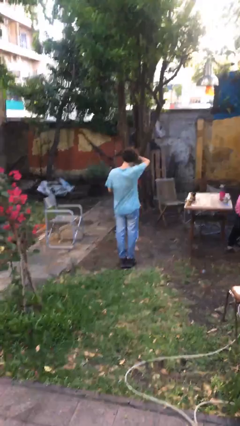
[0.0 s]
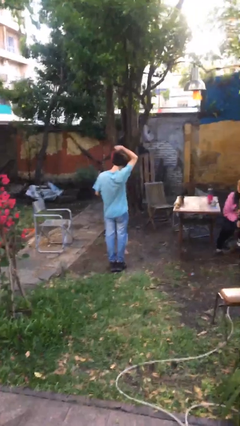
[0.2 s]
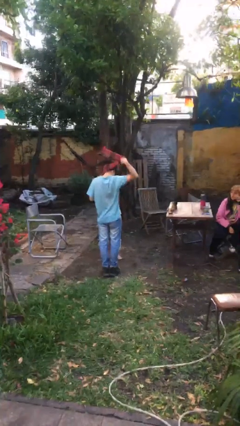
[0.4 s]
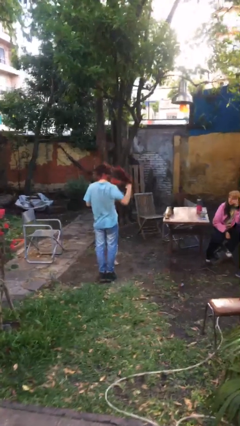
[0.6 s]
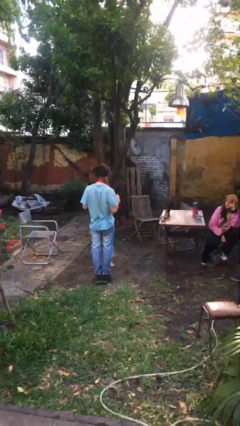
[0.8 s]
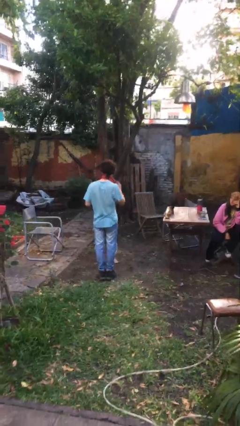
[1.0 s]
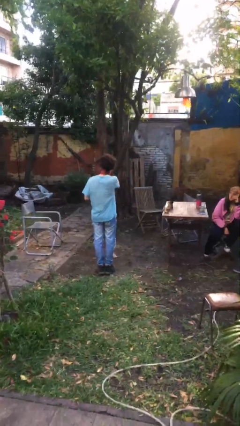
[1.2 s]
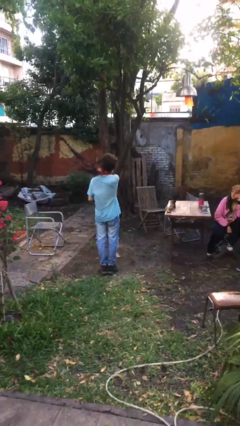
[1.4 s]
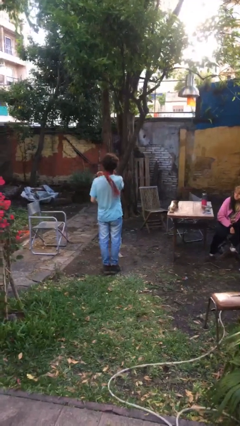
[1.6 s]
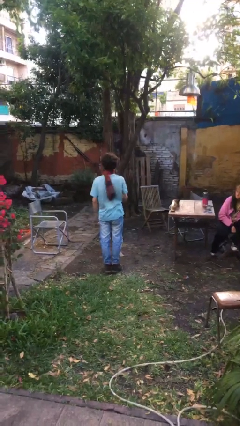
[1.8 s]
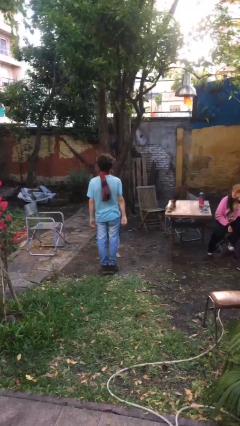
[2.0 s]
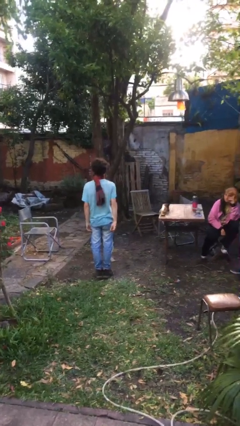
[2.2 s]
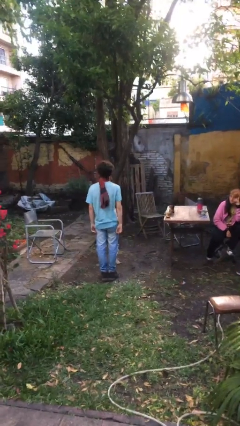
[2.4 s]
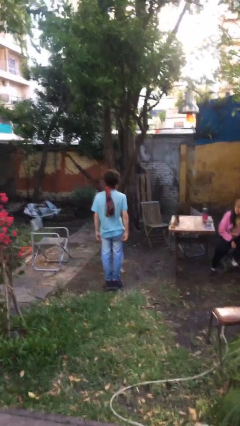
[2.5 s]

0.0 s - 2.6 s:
person puts on scarf

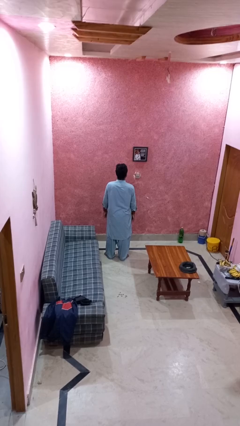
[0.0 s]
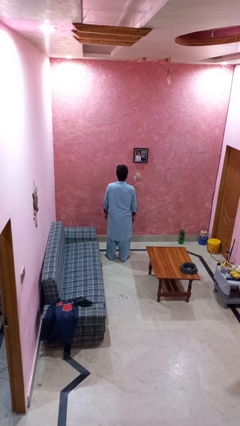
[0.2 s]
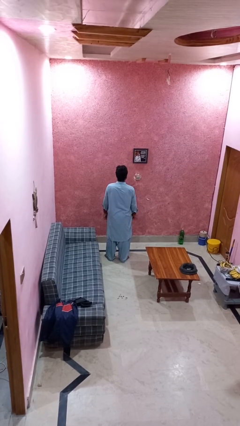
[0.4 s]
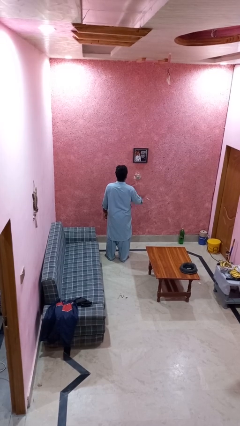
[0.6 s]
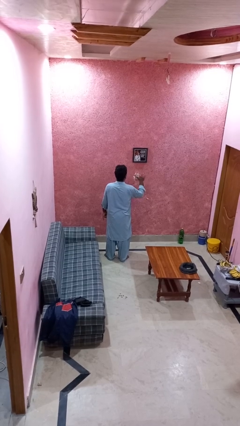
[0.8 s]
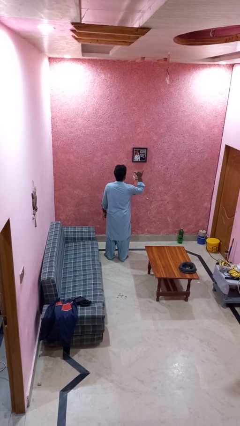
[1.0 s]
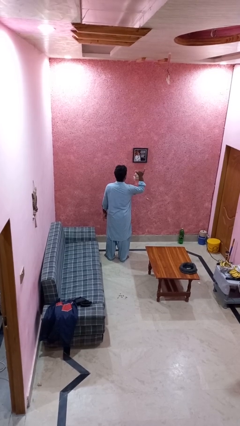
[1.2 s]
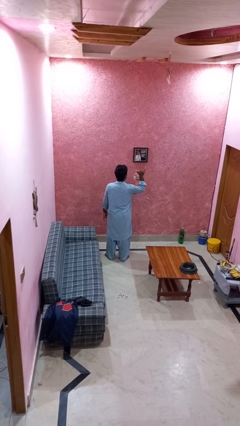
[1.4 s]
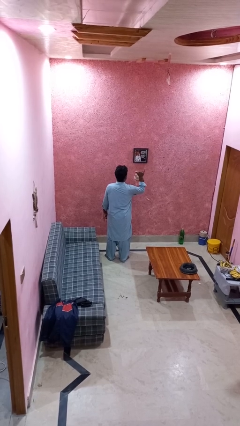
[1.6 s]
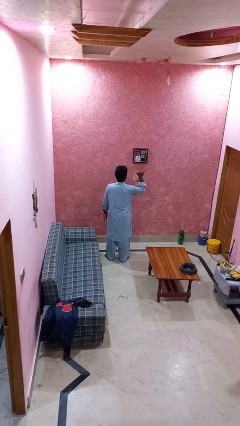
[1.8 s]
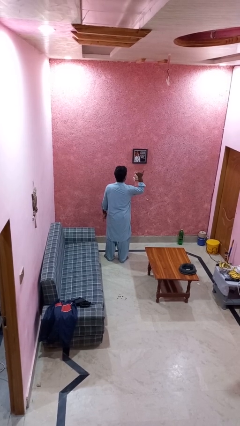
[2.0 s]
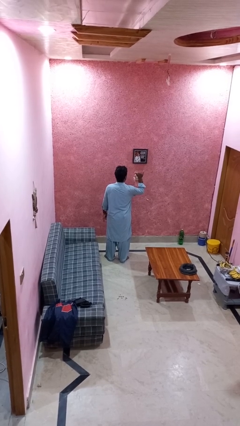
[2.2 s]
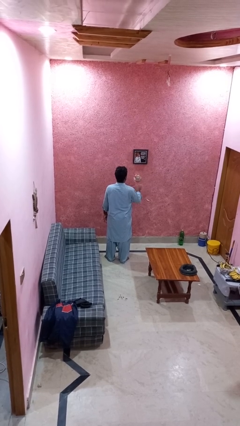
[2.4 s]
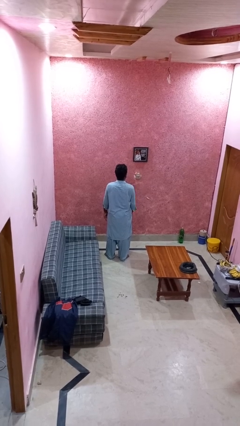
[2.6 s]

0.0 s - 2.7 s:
person gestures hang loose

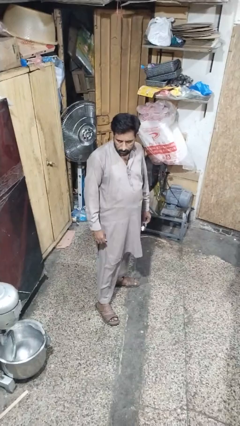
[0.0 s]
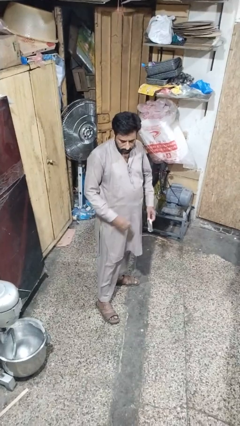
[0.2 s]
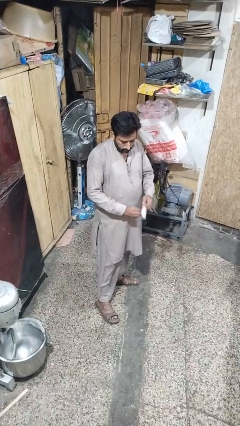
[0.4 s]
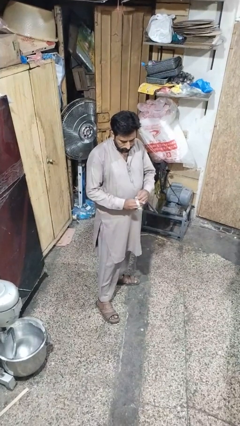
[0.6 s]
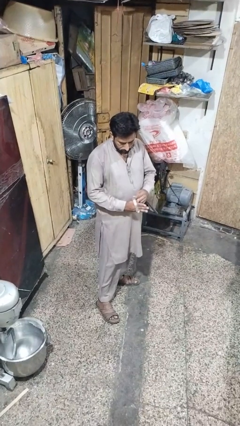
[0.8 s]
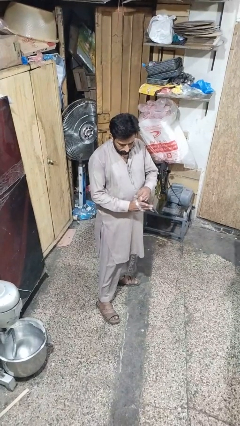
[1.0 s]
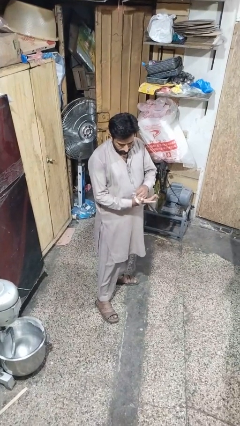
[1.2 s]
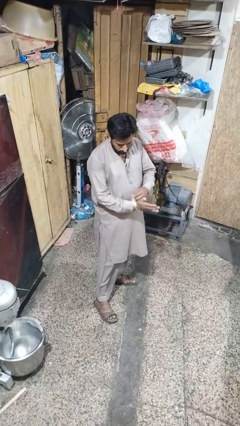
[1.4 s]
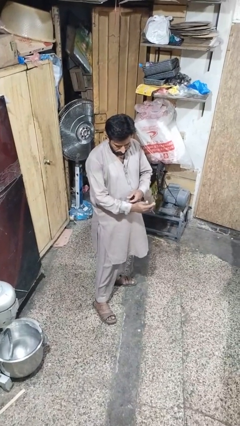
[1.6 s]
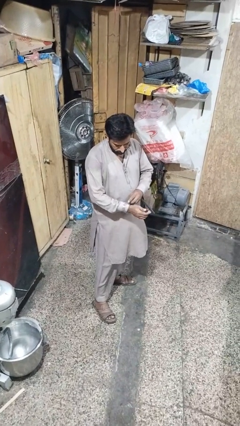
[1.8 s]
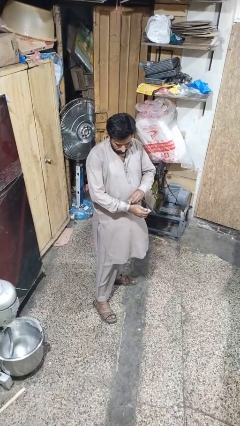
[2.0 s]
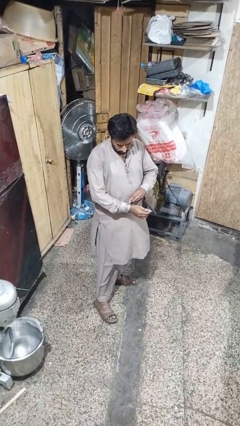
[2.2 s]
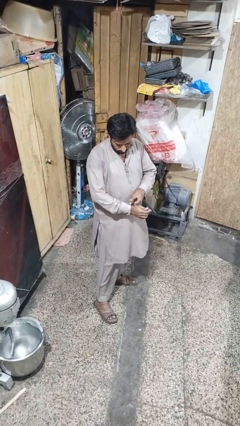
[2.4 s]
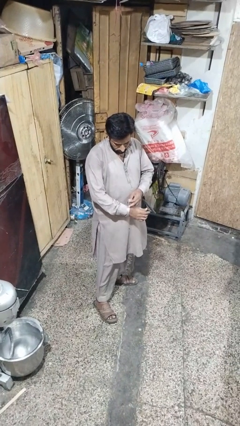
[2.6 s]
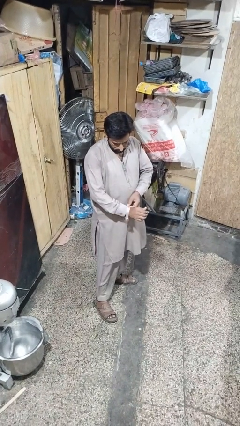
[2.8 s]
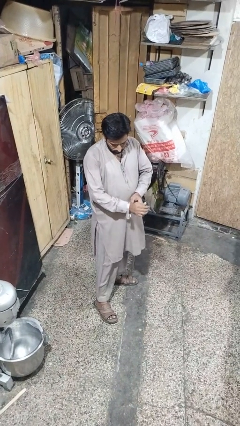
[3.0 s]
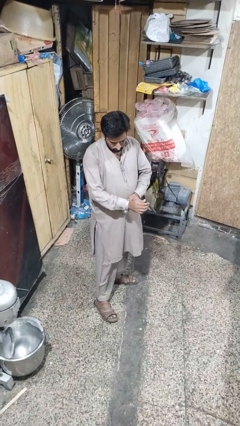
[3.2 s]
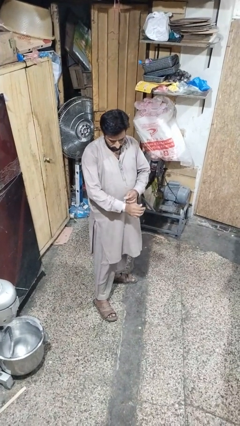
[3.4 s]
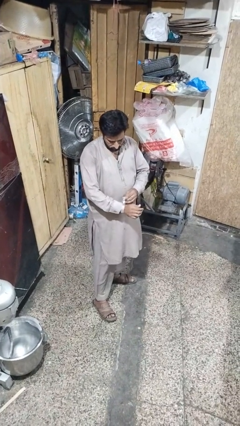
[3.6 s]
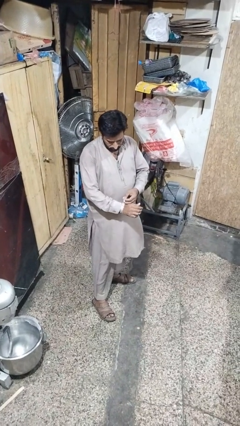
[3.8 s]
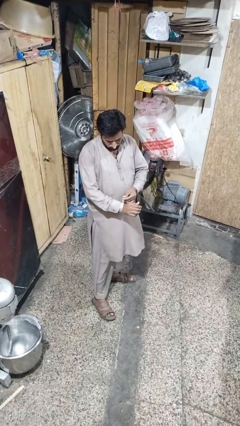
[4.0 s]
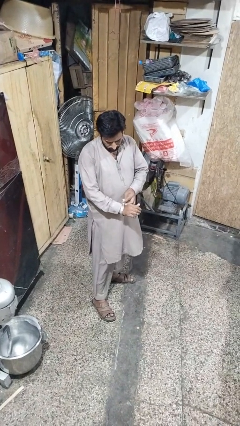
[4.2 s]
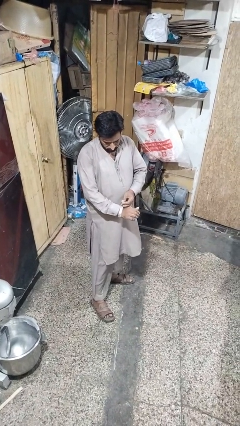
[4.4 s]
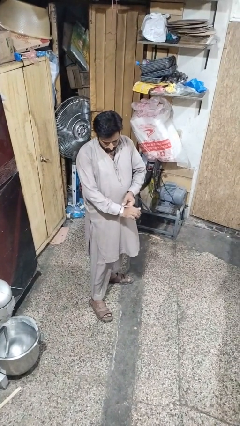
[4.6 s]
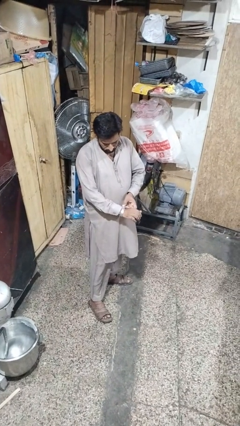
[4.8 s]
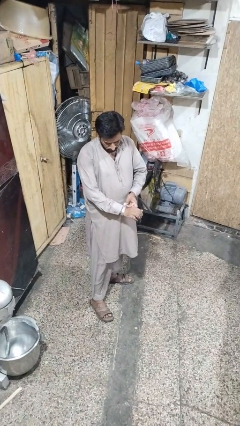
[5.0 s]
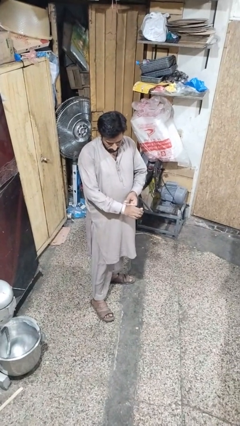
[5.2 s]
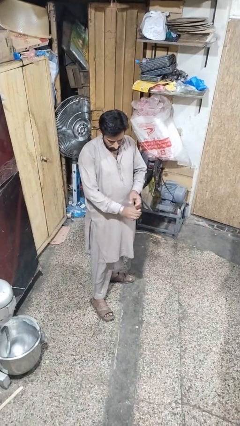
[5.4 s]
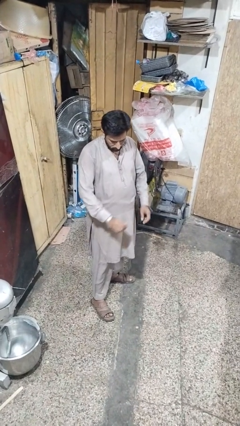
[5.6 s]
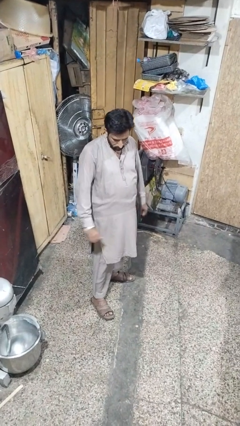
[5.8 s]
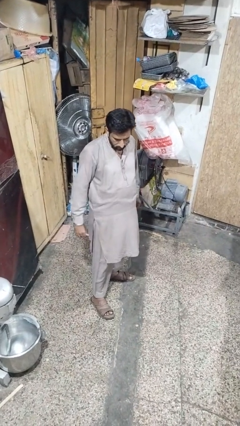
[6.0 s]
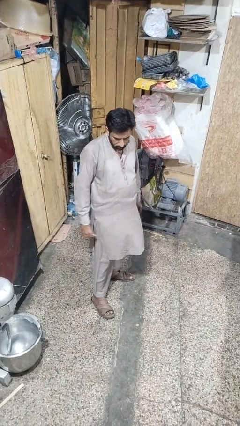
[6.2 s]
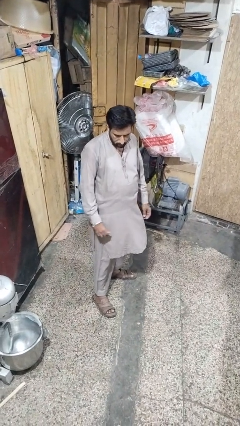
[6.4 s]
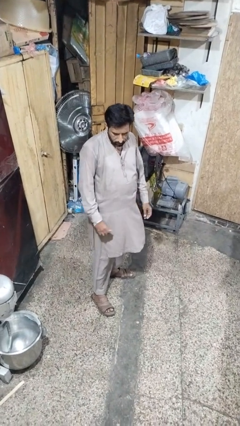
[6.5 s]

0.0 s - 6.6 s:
person puts on wristwatch

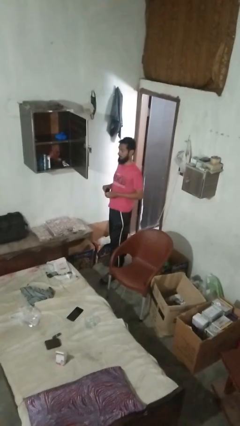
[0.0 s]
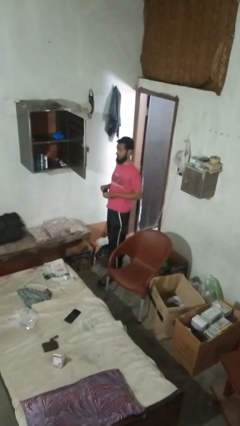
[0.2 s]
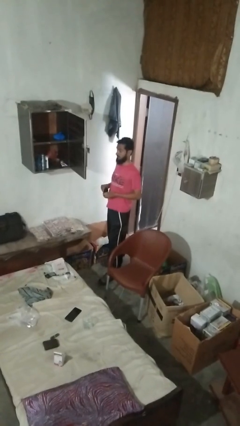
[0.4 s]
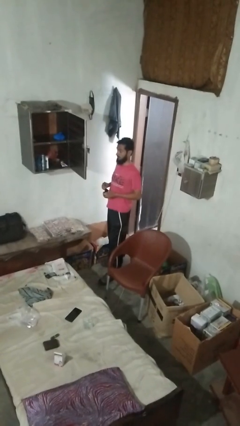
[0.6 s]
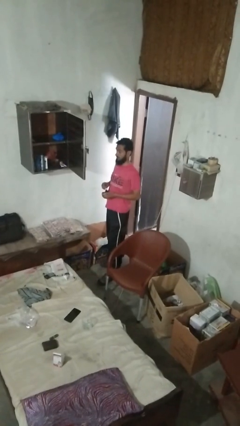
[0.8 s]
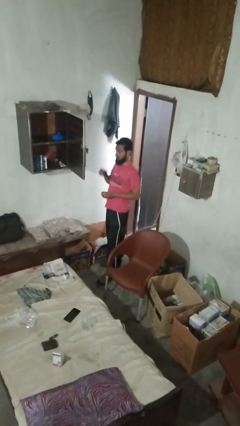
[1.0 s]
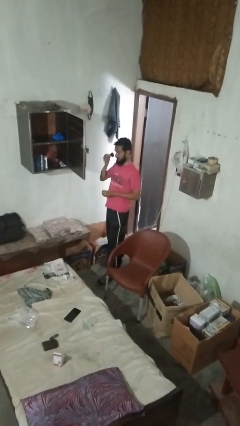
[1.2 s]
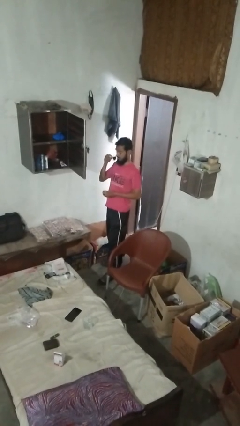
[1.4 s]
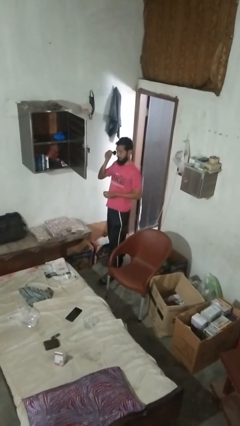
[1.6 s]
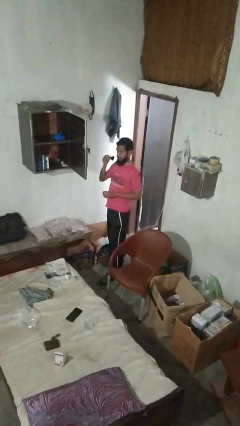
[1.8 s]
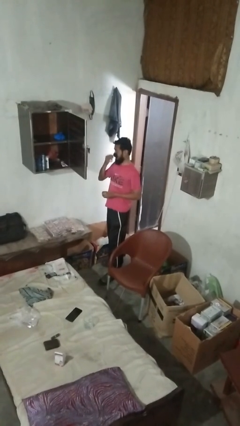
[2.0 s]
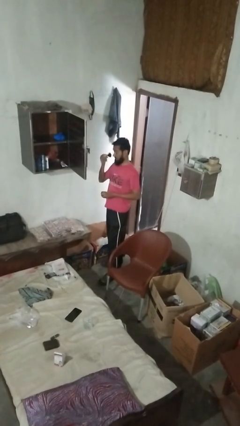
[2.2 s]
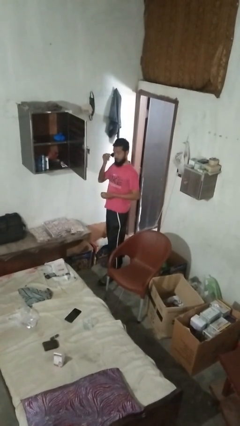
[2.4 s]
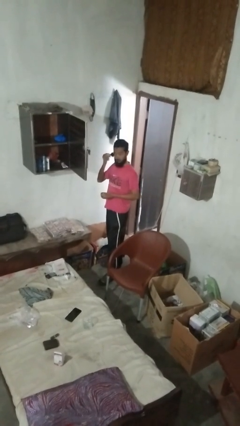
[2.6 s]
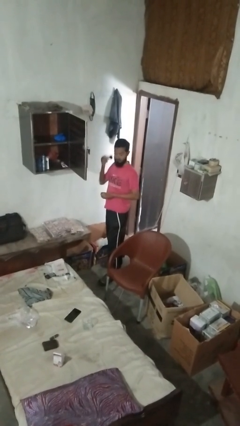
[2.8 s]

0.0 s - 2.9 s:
person applies foundation makeup

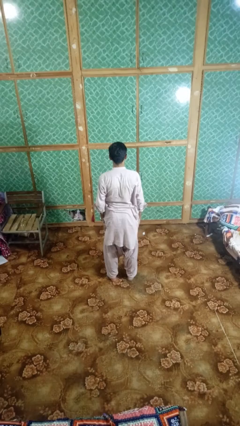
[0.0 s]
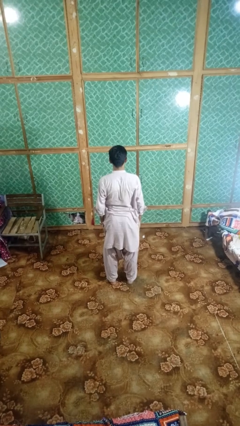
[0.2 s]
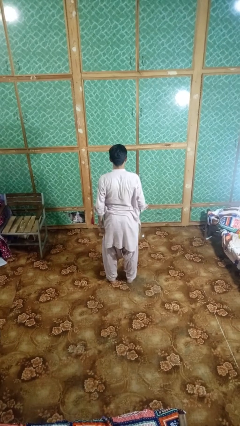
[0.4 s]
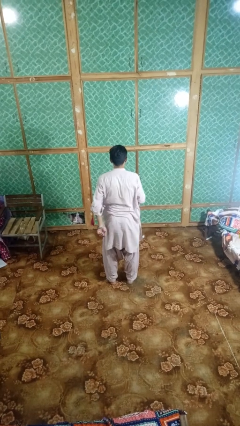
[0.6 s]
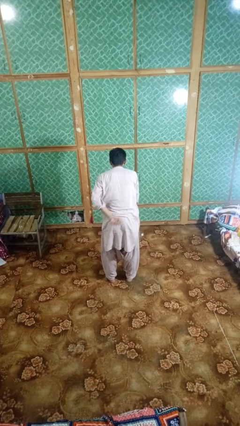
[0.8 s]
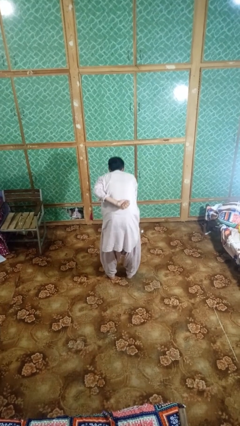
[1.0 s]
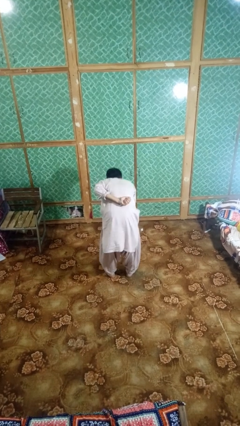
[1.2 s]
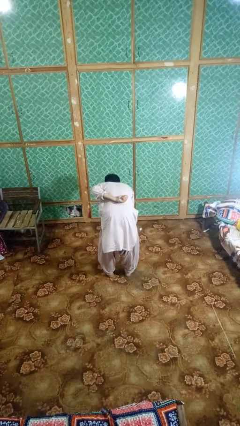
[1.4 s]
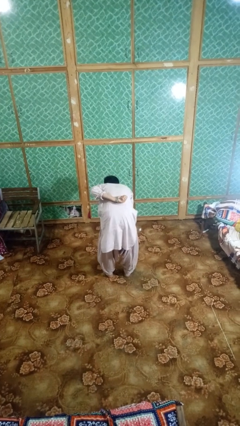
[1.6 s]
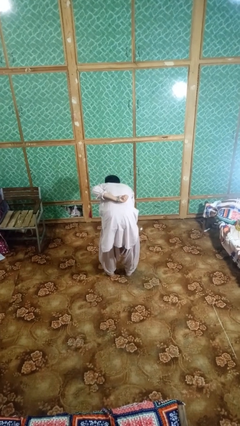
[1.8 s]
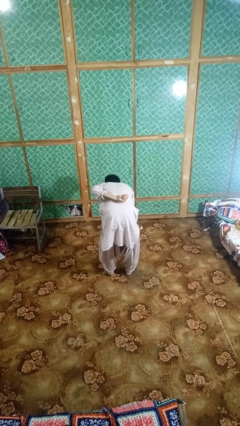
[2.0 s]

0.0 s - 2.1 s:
person bows

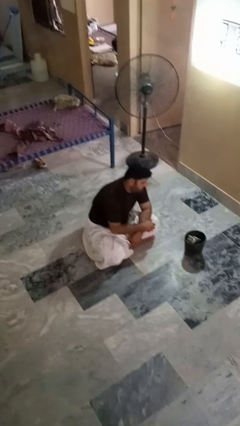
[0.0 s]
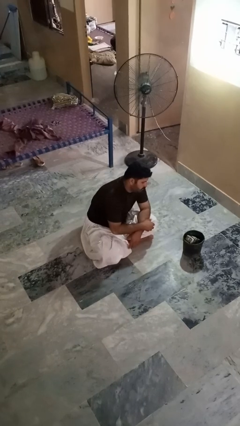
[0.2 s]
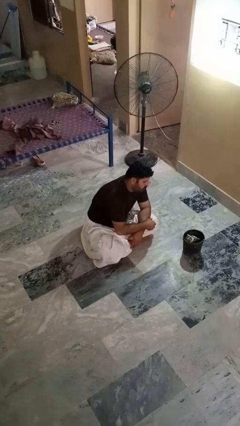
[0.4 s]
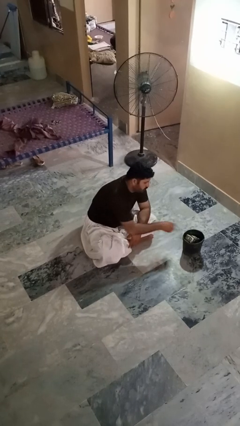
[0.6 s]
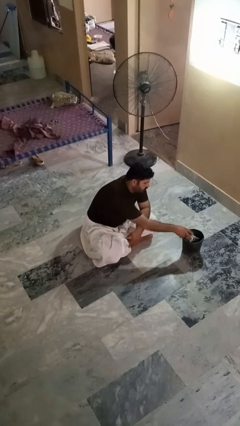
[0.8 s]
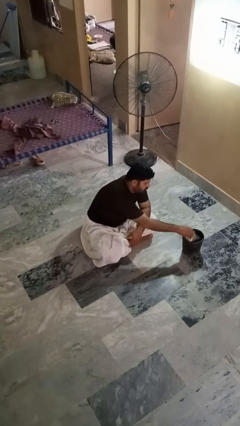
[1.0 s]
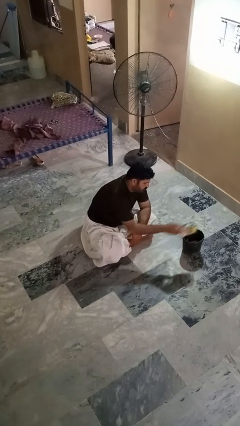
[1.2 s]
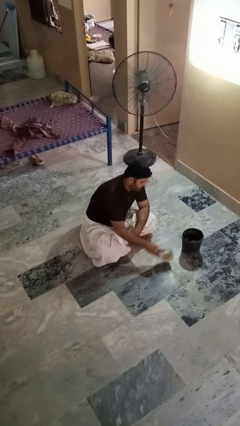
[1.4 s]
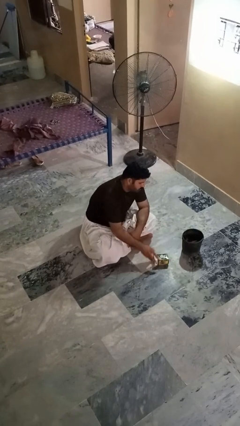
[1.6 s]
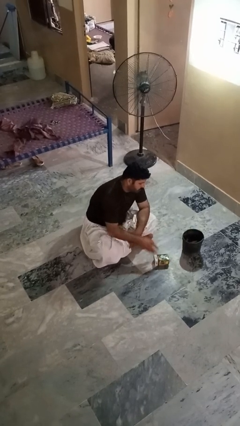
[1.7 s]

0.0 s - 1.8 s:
person takes object from basket
